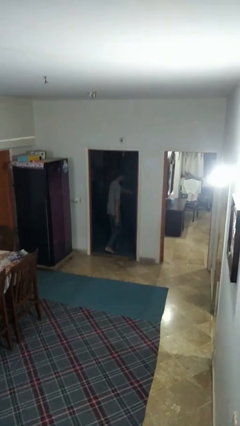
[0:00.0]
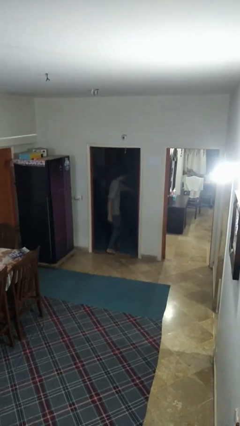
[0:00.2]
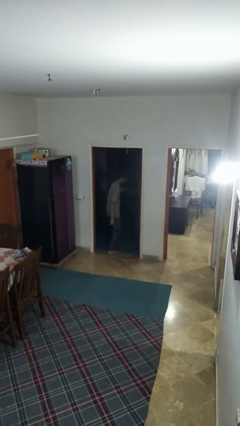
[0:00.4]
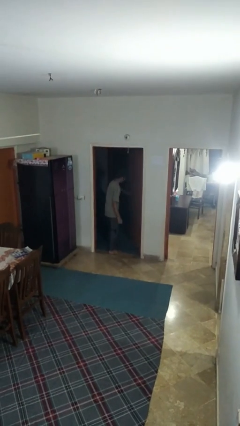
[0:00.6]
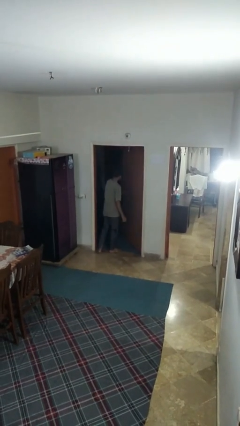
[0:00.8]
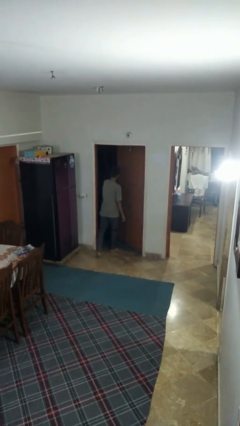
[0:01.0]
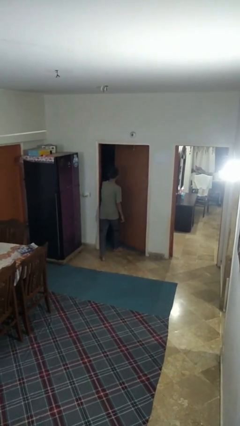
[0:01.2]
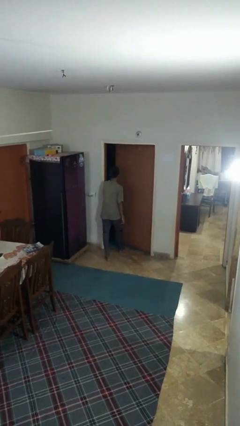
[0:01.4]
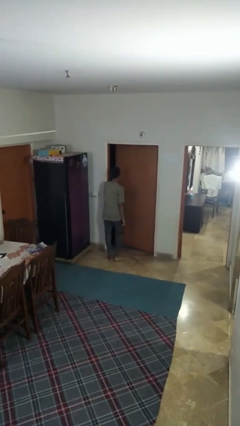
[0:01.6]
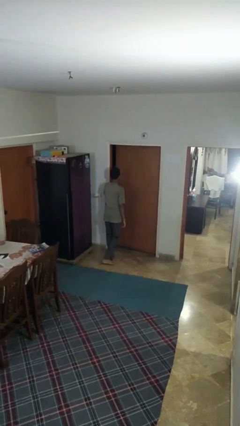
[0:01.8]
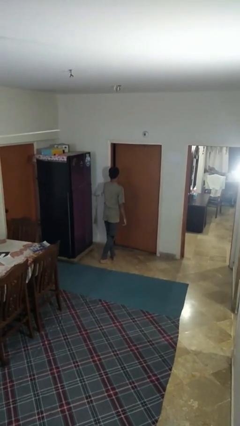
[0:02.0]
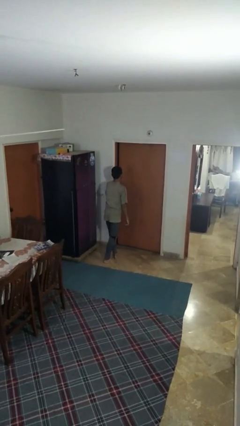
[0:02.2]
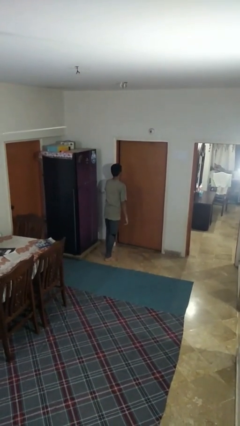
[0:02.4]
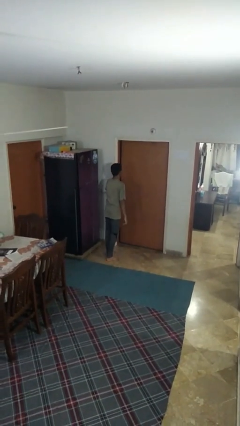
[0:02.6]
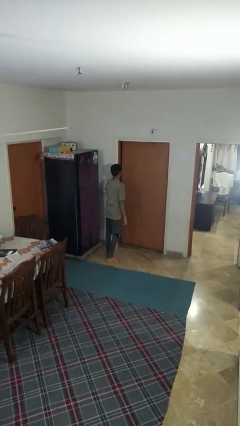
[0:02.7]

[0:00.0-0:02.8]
person closes facility door

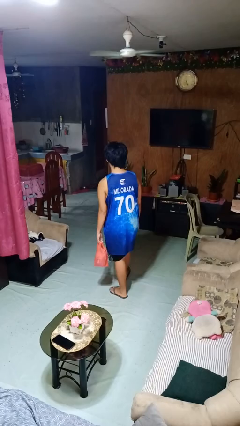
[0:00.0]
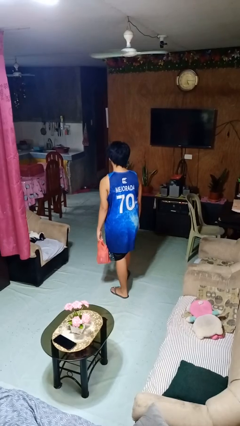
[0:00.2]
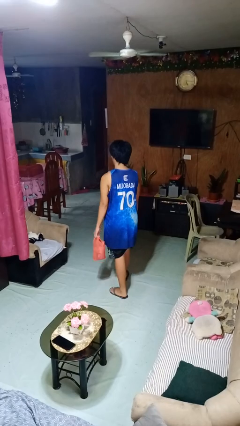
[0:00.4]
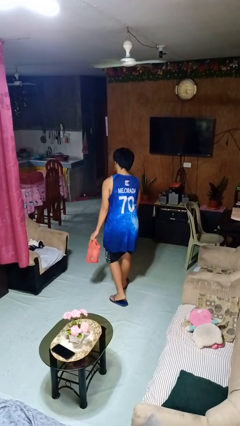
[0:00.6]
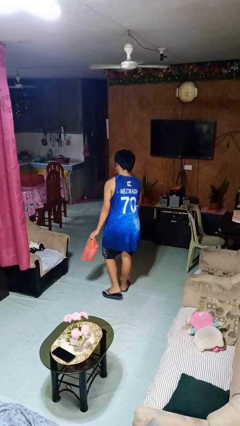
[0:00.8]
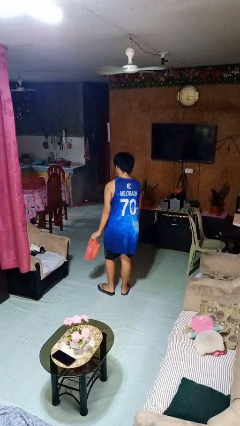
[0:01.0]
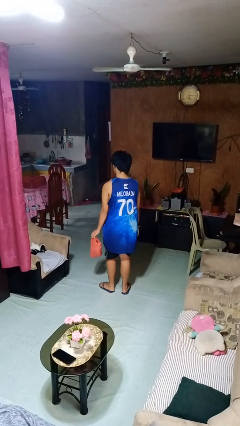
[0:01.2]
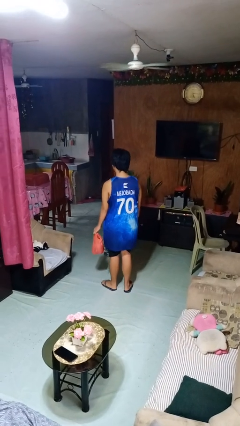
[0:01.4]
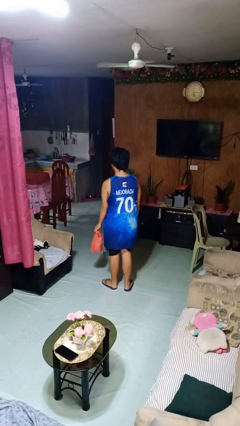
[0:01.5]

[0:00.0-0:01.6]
person carries groceries

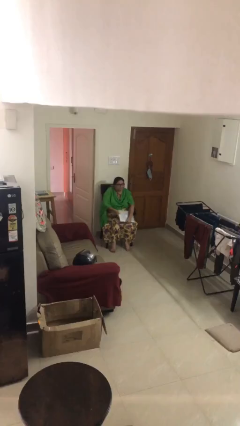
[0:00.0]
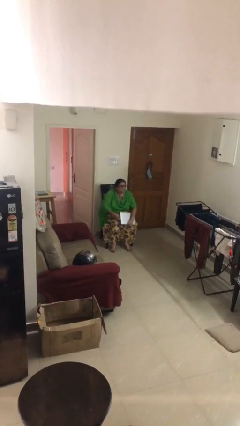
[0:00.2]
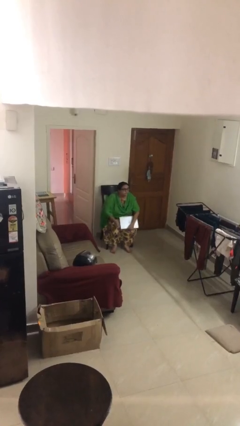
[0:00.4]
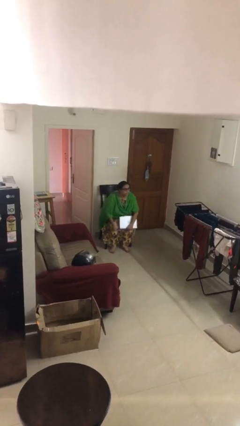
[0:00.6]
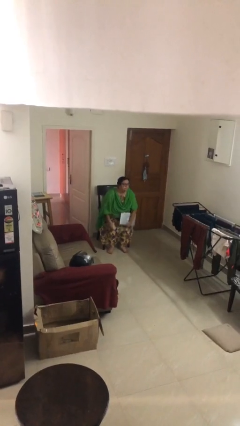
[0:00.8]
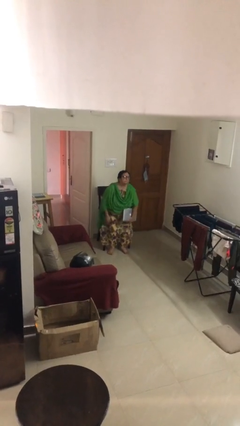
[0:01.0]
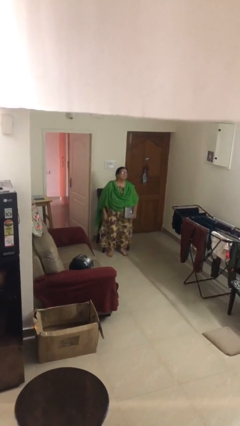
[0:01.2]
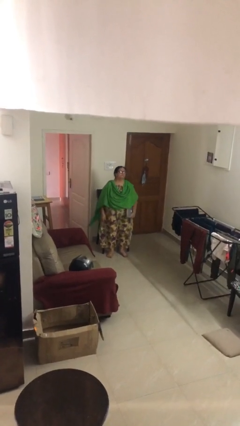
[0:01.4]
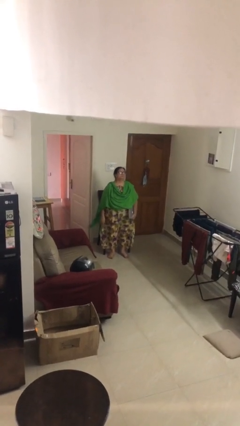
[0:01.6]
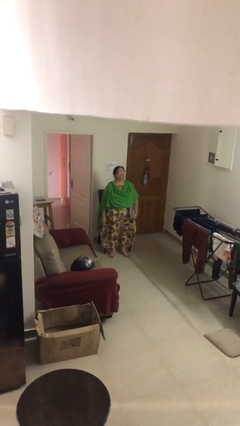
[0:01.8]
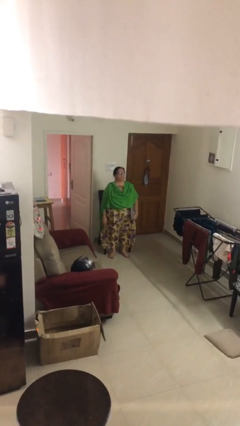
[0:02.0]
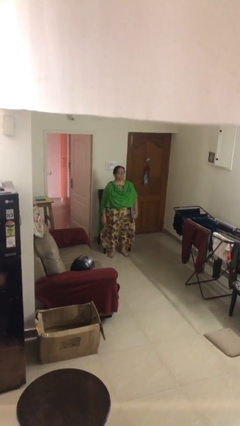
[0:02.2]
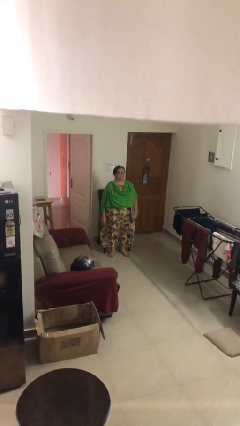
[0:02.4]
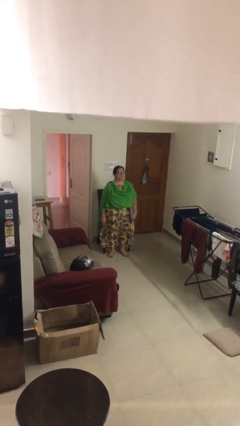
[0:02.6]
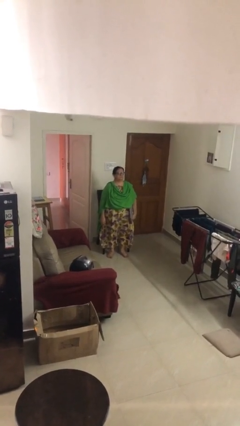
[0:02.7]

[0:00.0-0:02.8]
person stands up

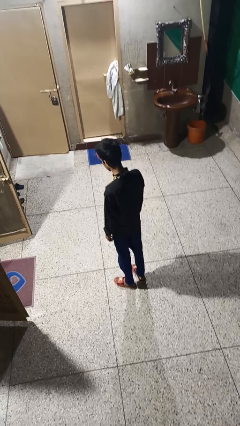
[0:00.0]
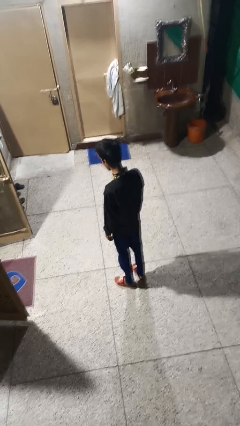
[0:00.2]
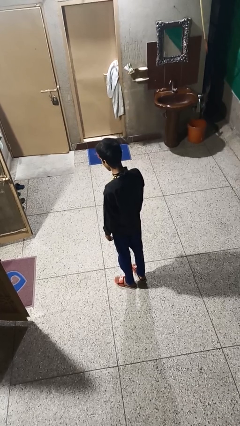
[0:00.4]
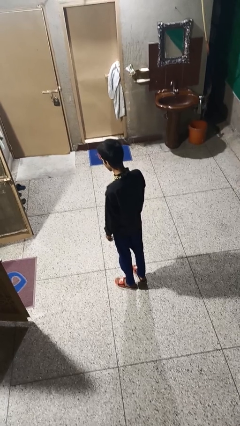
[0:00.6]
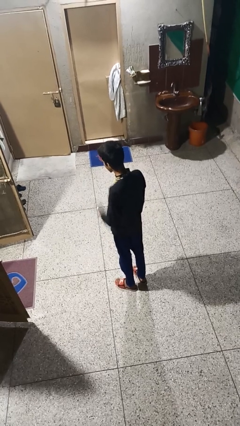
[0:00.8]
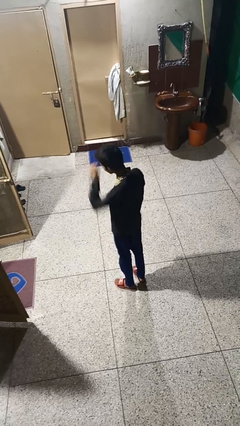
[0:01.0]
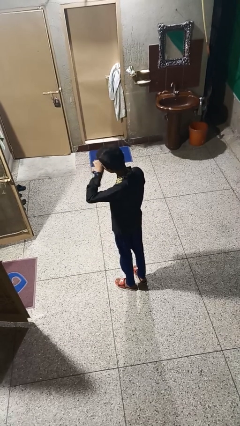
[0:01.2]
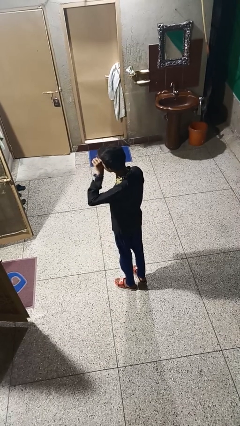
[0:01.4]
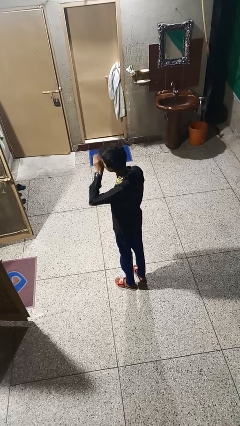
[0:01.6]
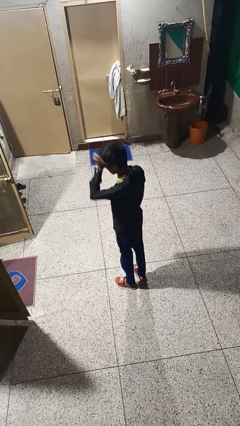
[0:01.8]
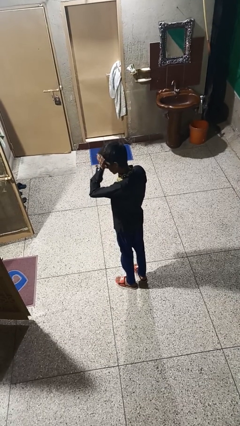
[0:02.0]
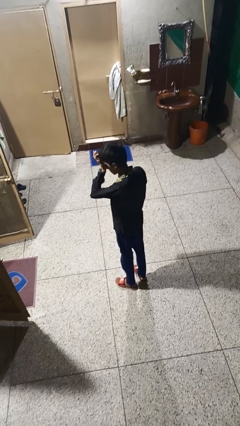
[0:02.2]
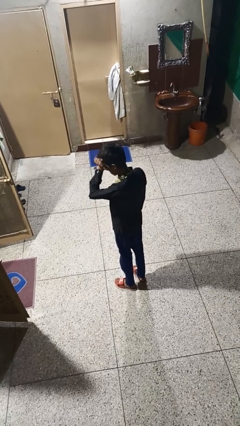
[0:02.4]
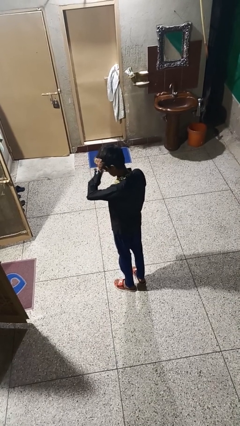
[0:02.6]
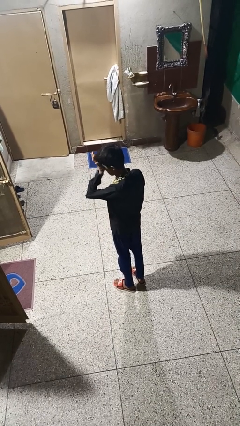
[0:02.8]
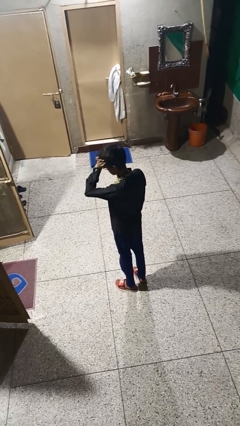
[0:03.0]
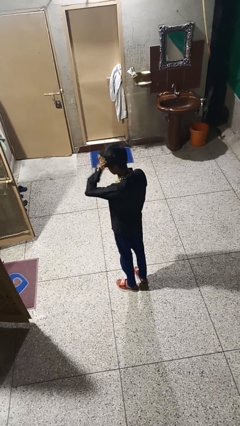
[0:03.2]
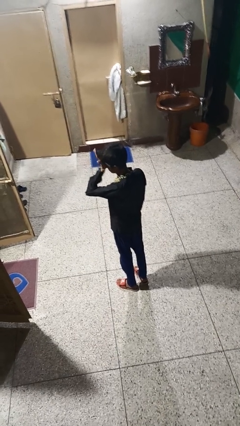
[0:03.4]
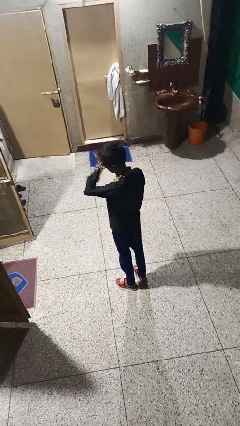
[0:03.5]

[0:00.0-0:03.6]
person rubs eyes

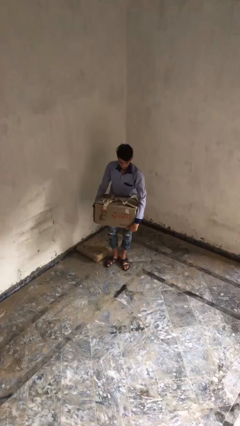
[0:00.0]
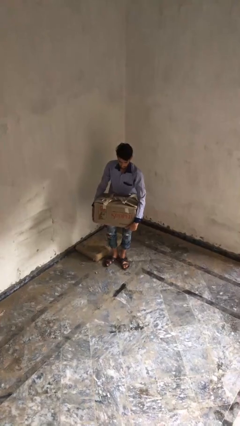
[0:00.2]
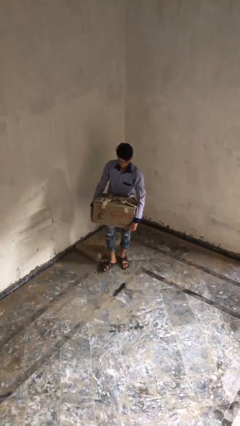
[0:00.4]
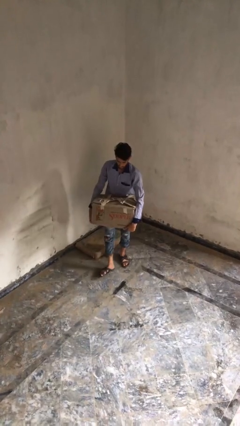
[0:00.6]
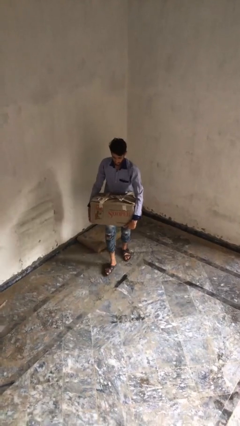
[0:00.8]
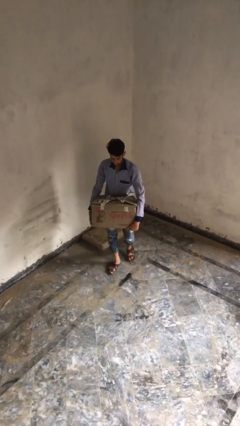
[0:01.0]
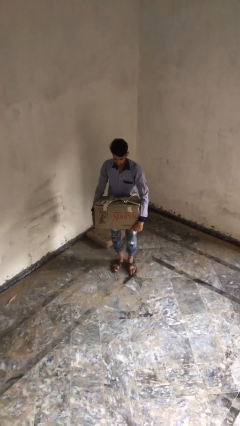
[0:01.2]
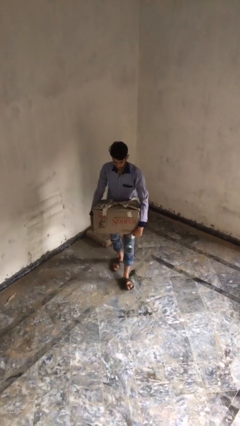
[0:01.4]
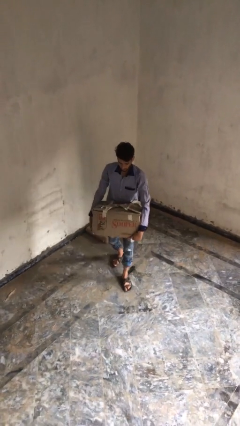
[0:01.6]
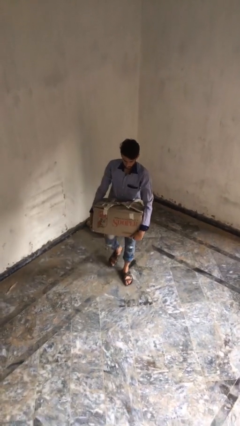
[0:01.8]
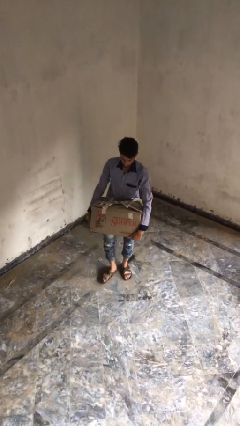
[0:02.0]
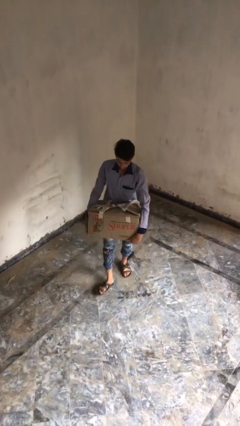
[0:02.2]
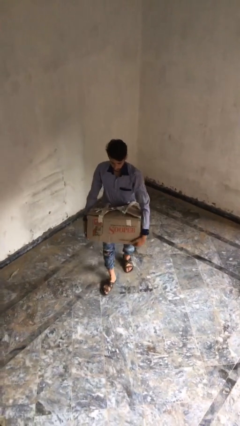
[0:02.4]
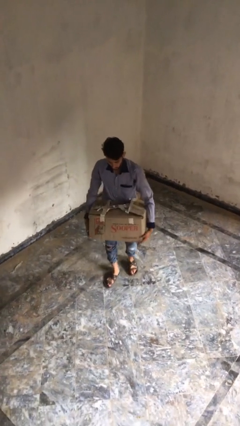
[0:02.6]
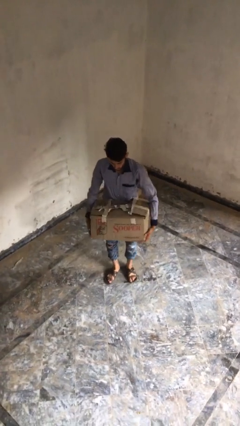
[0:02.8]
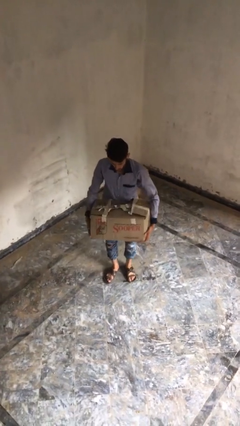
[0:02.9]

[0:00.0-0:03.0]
person carries heavy object

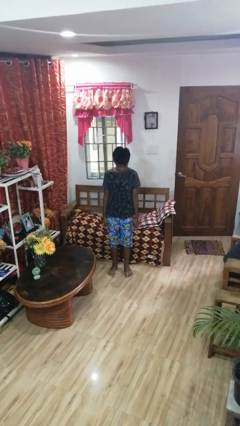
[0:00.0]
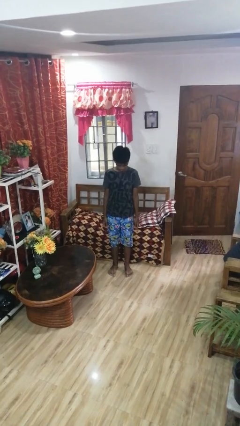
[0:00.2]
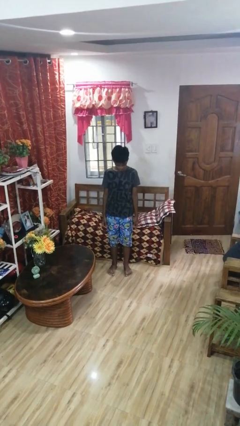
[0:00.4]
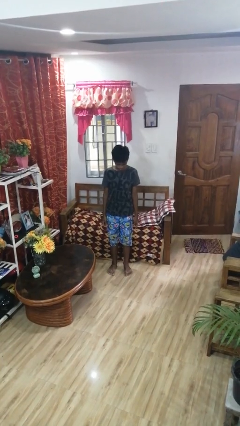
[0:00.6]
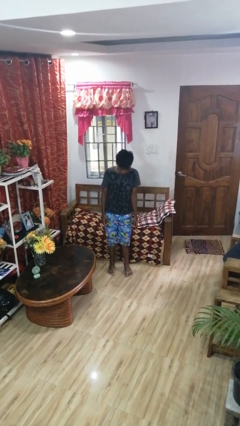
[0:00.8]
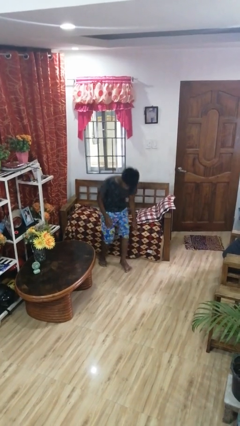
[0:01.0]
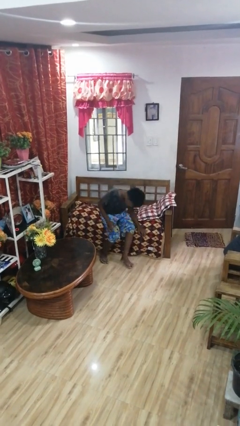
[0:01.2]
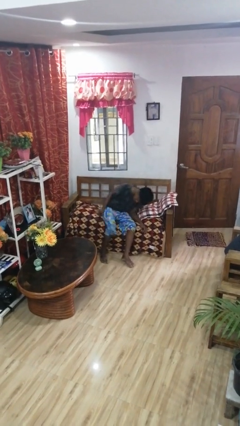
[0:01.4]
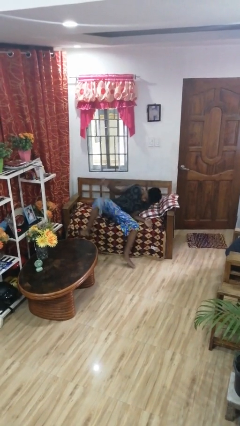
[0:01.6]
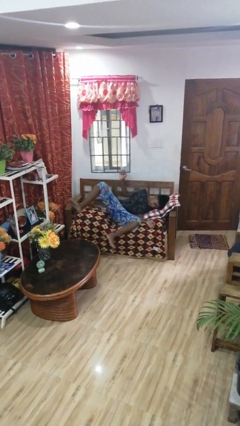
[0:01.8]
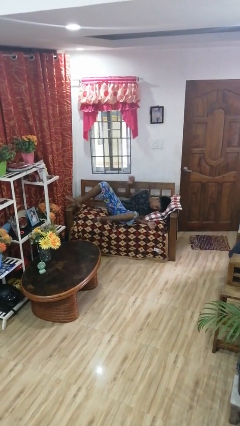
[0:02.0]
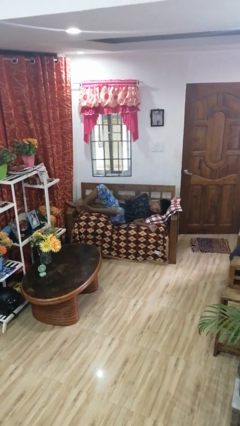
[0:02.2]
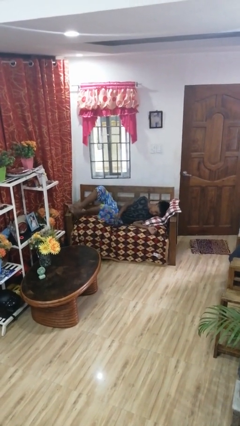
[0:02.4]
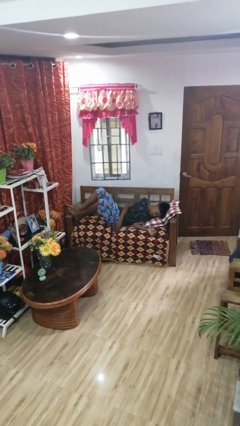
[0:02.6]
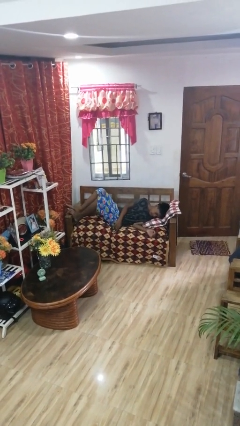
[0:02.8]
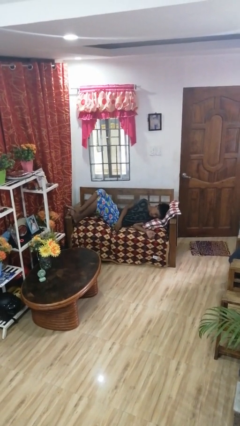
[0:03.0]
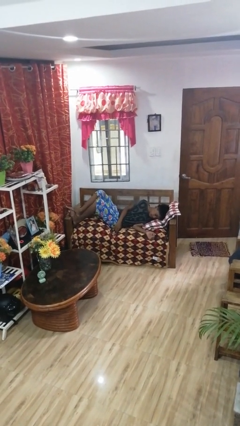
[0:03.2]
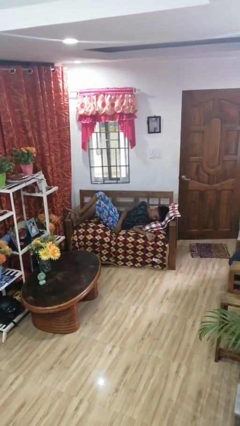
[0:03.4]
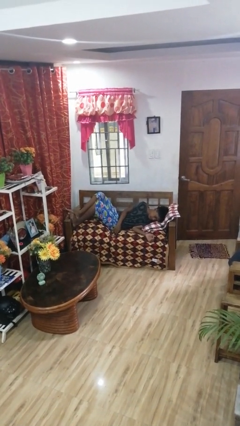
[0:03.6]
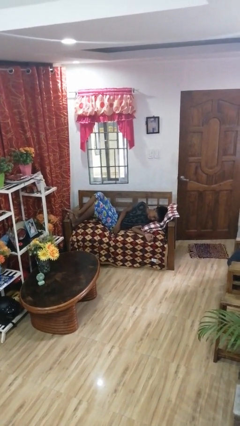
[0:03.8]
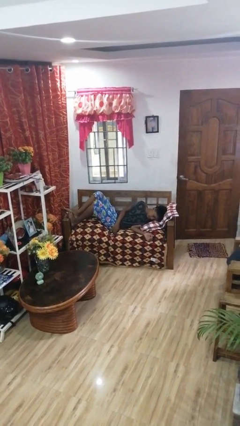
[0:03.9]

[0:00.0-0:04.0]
person lies down on couch
